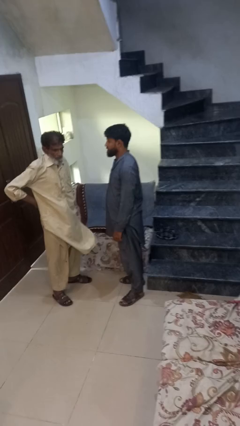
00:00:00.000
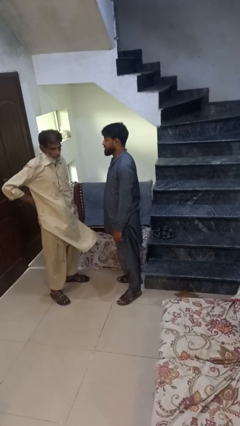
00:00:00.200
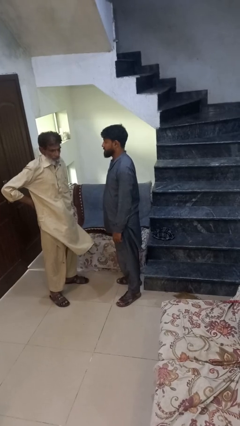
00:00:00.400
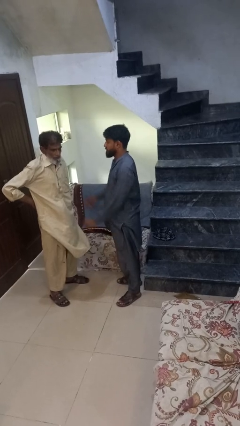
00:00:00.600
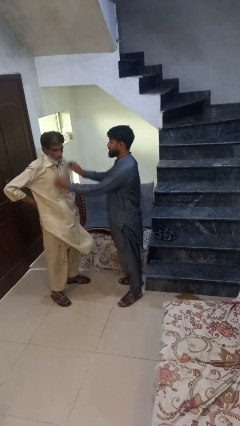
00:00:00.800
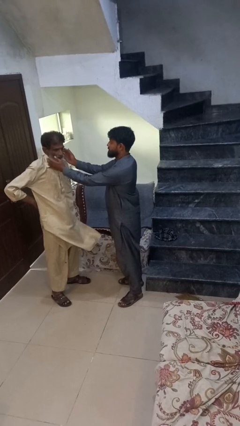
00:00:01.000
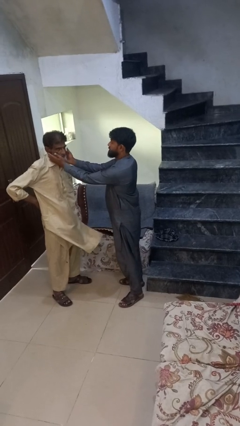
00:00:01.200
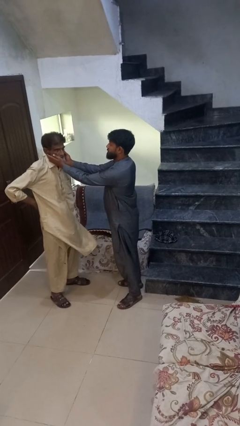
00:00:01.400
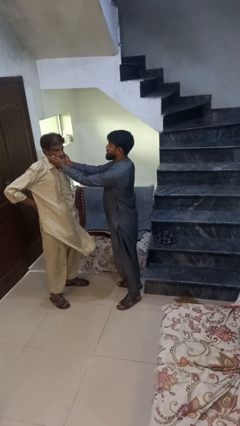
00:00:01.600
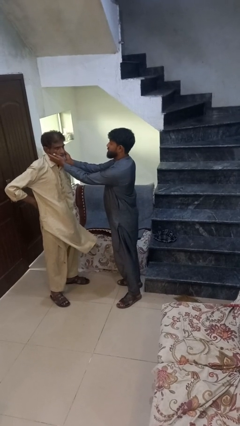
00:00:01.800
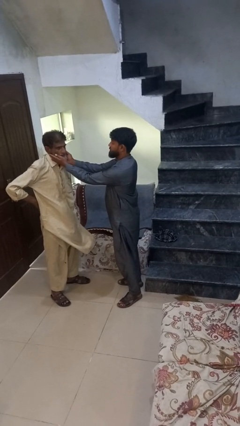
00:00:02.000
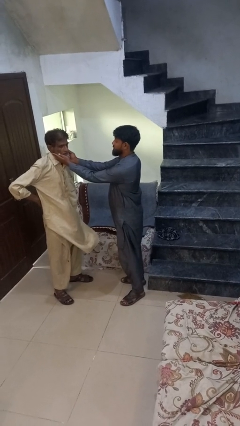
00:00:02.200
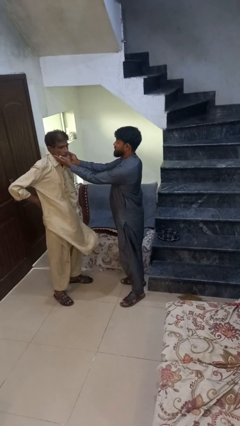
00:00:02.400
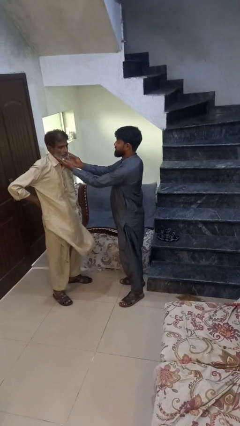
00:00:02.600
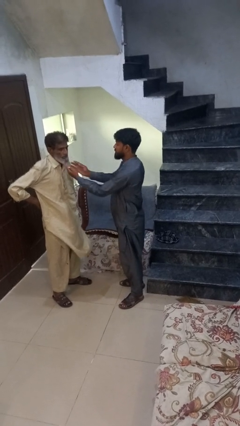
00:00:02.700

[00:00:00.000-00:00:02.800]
person touches face of person

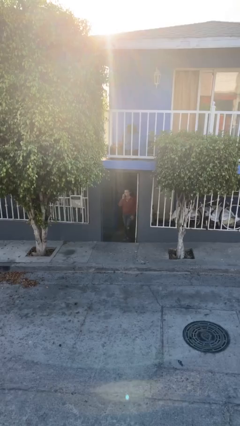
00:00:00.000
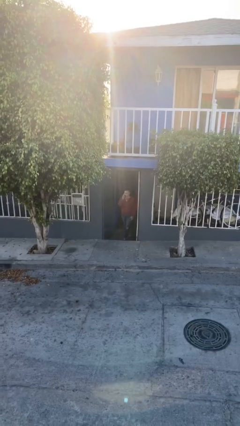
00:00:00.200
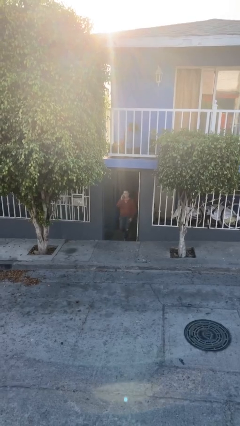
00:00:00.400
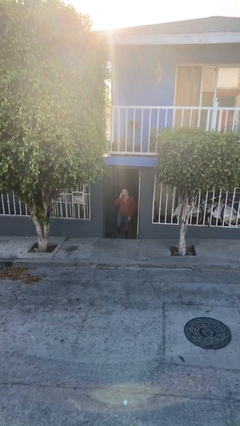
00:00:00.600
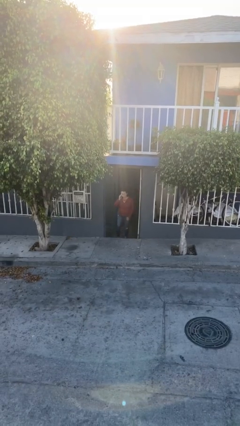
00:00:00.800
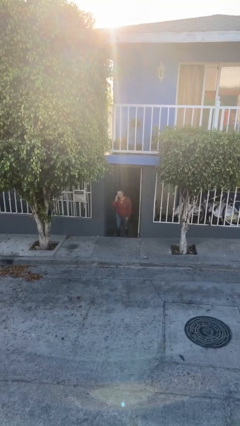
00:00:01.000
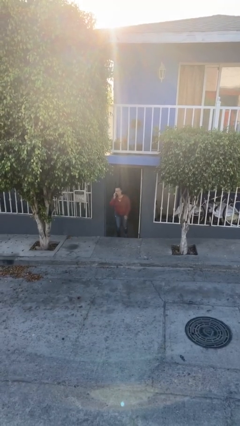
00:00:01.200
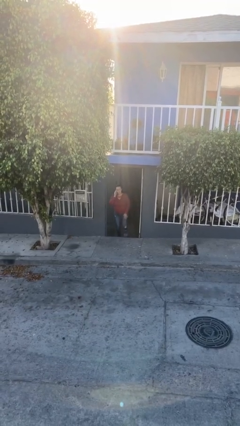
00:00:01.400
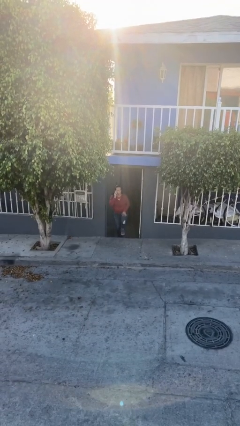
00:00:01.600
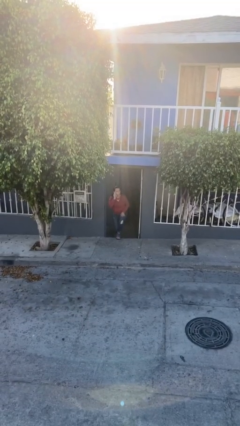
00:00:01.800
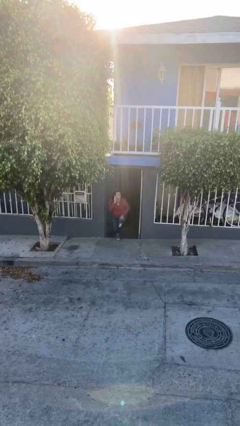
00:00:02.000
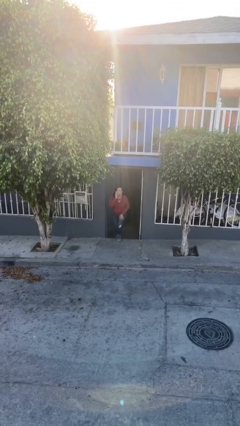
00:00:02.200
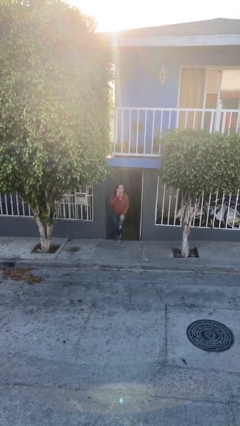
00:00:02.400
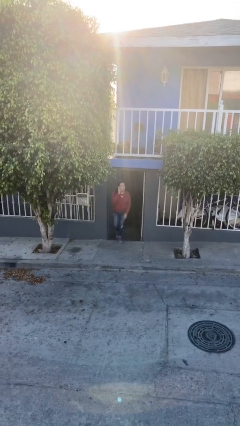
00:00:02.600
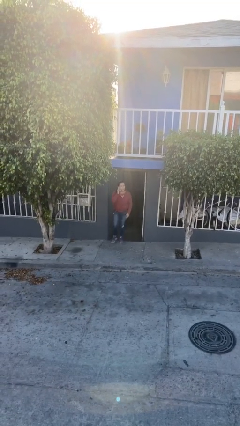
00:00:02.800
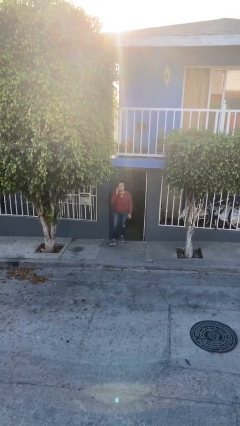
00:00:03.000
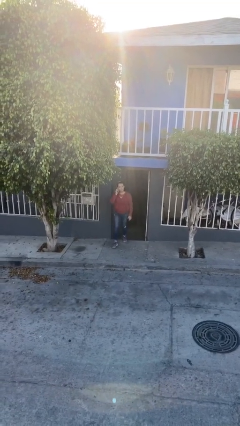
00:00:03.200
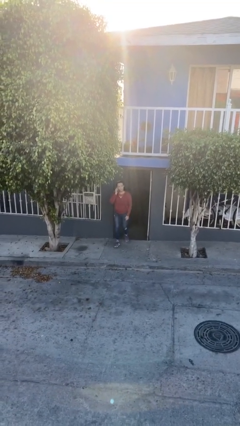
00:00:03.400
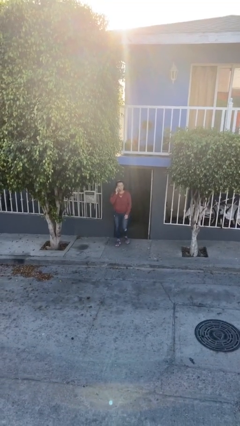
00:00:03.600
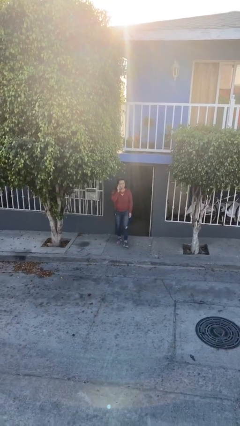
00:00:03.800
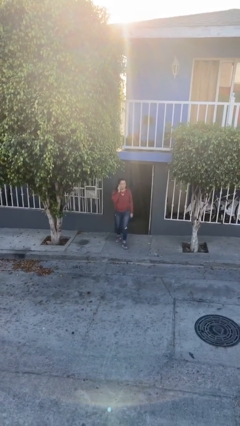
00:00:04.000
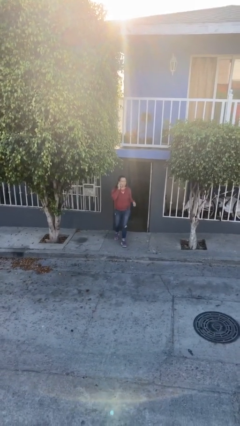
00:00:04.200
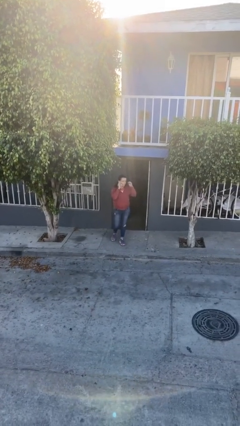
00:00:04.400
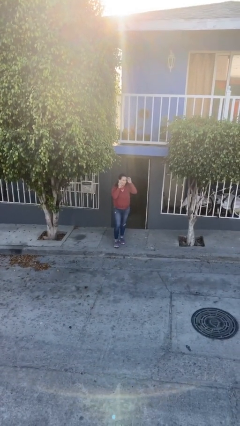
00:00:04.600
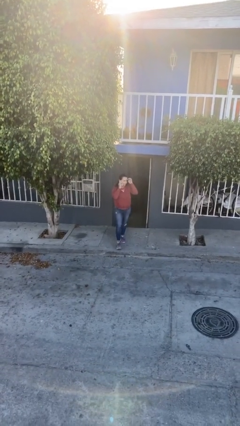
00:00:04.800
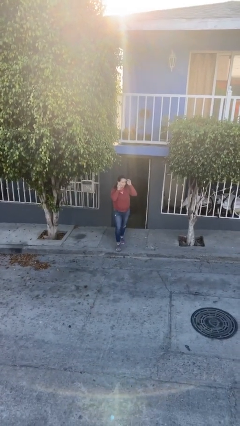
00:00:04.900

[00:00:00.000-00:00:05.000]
person enters scene through structure

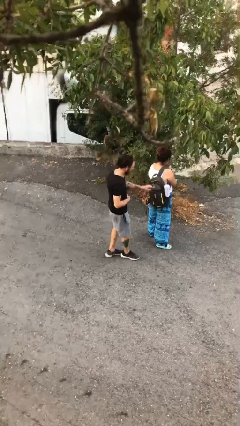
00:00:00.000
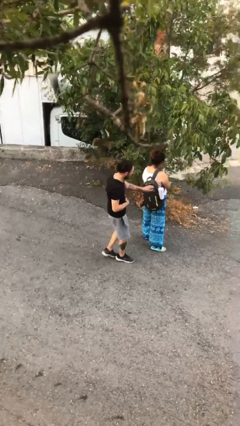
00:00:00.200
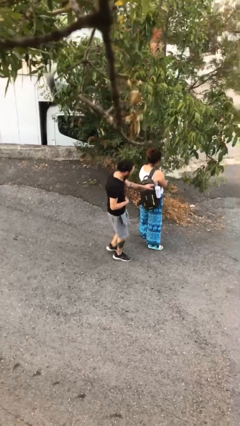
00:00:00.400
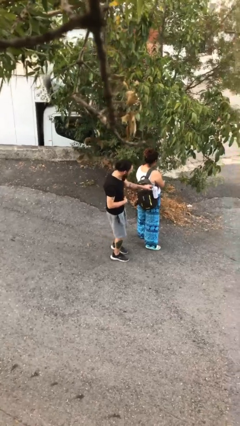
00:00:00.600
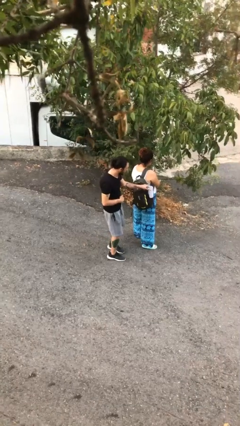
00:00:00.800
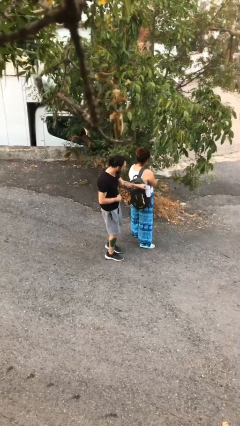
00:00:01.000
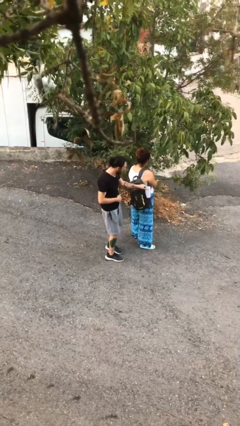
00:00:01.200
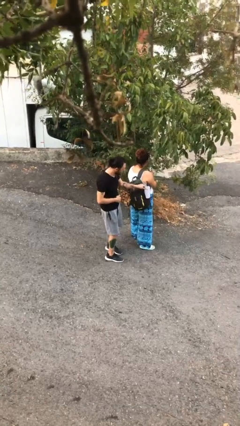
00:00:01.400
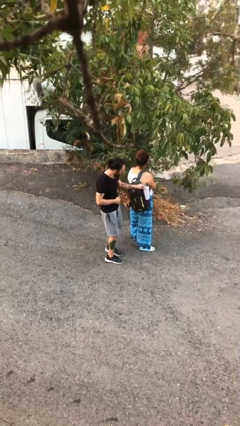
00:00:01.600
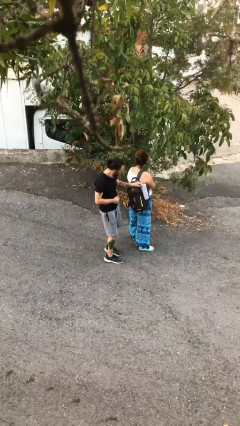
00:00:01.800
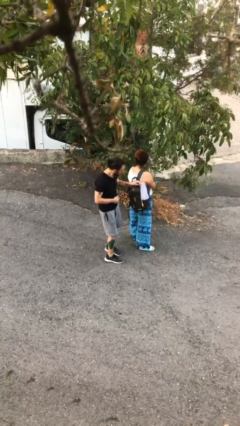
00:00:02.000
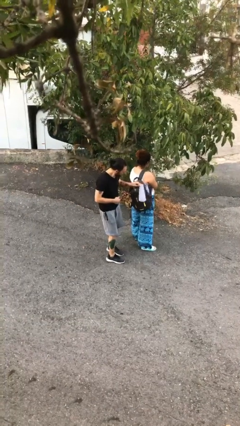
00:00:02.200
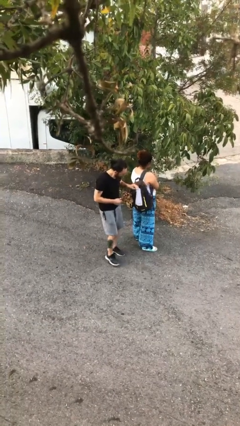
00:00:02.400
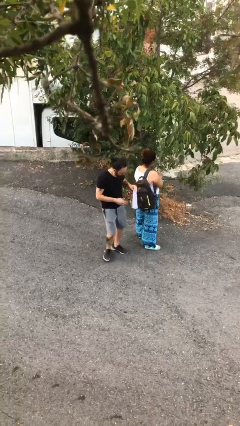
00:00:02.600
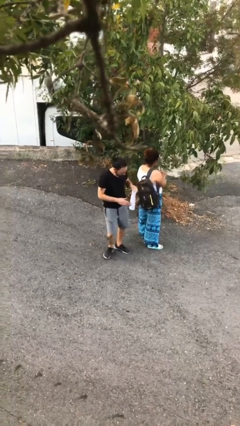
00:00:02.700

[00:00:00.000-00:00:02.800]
person steals object from person

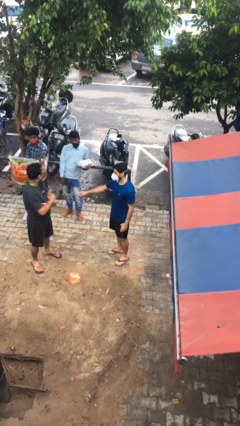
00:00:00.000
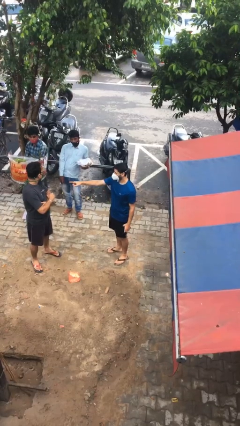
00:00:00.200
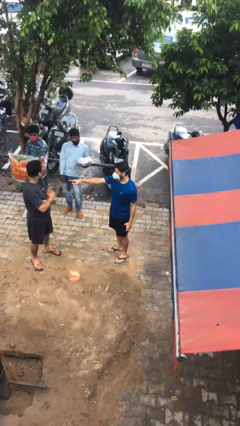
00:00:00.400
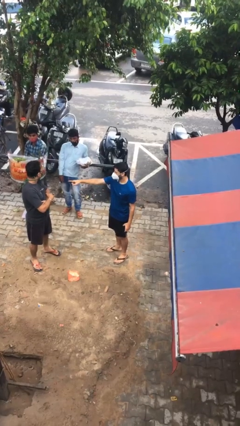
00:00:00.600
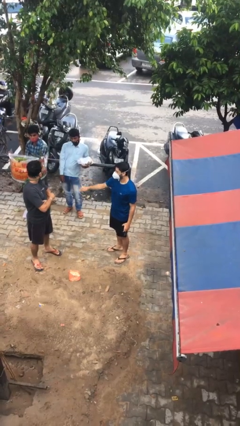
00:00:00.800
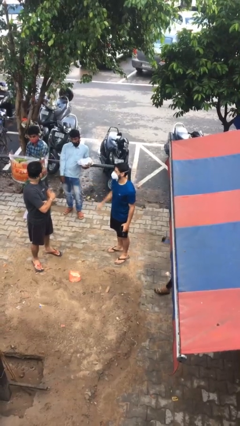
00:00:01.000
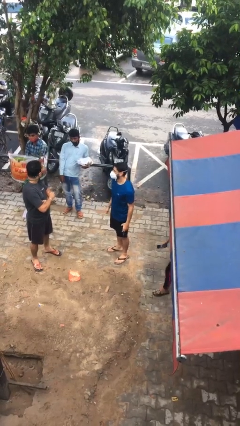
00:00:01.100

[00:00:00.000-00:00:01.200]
person points at person

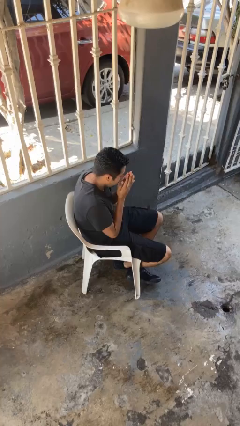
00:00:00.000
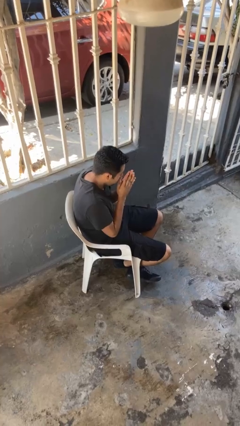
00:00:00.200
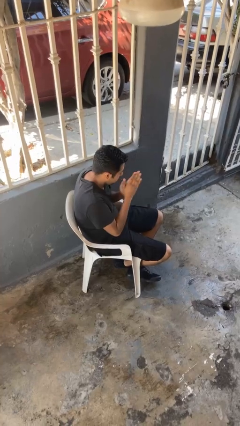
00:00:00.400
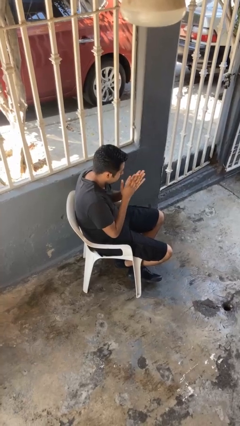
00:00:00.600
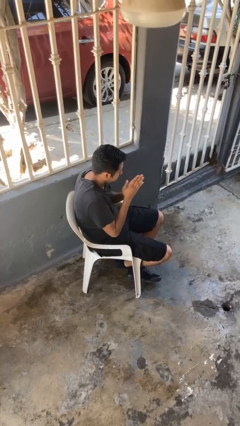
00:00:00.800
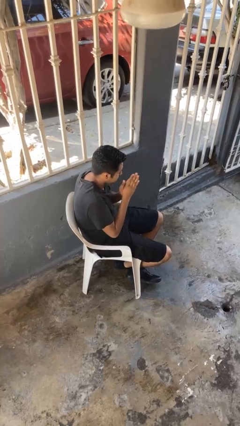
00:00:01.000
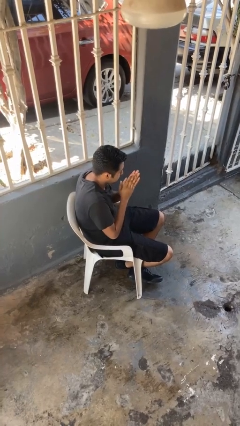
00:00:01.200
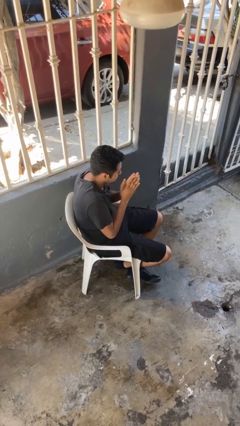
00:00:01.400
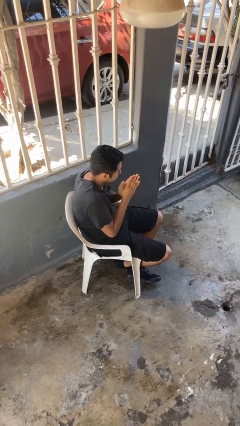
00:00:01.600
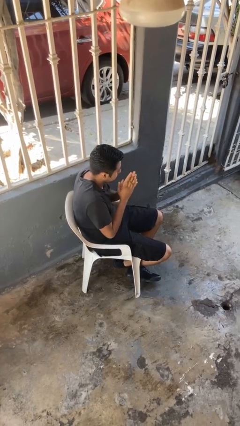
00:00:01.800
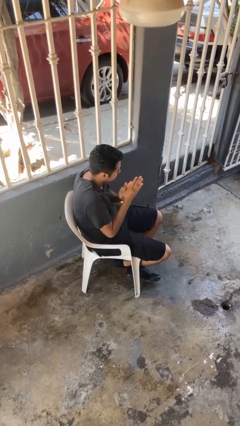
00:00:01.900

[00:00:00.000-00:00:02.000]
person blows into hands

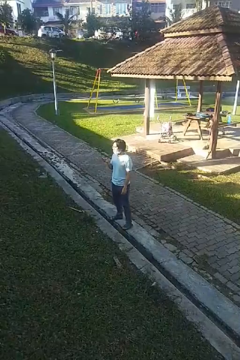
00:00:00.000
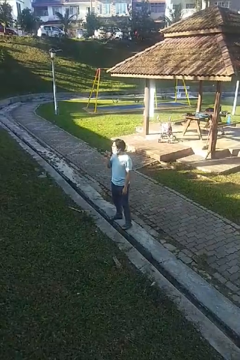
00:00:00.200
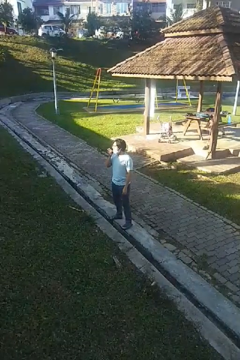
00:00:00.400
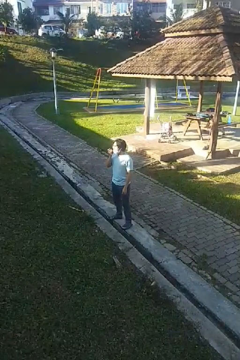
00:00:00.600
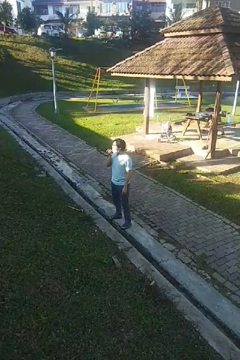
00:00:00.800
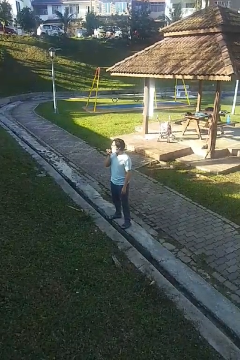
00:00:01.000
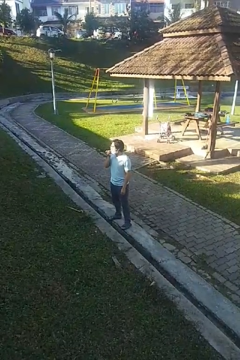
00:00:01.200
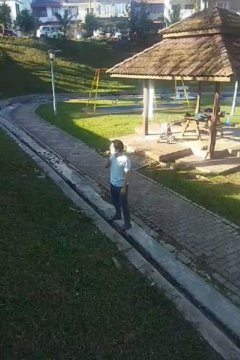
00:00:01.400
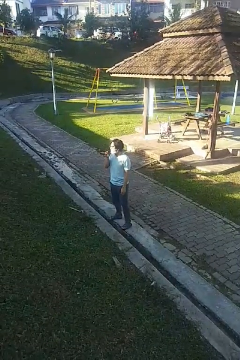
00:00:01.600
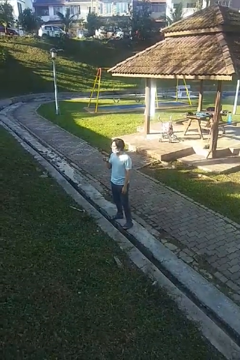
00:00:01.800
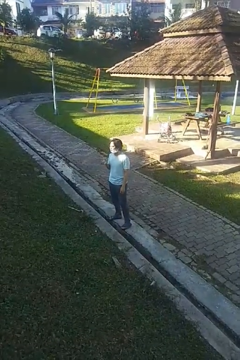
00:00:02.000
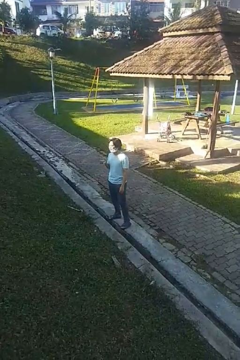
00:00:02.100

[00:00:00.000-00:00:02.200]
person flosses

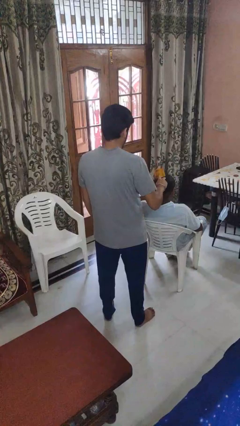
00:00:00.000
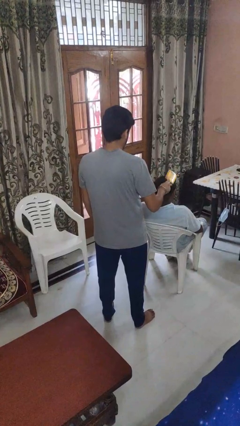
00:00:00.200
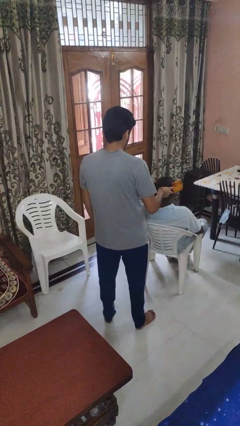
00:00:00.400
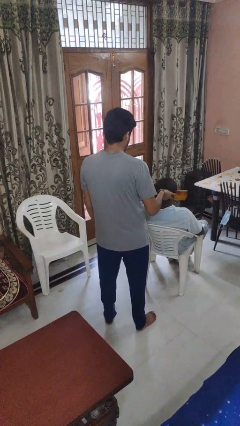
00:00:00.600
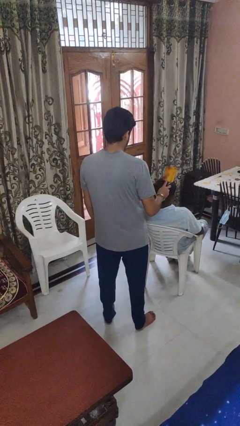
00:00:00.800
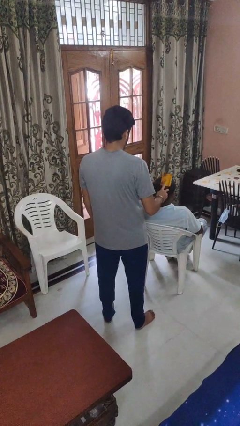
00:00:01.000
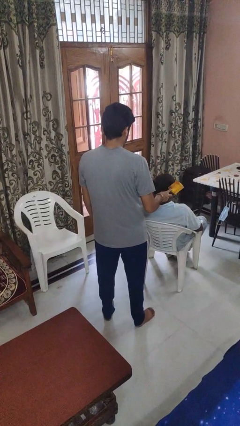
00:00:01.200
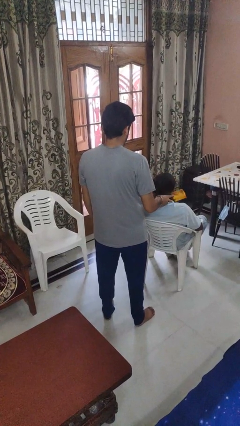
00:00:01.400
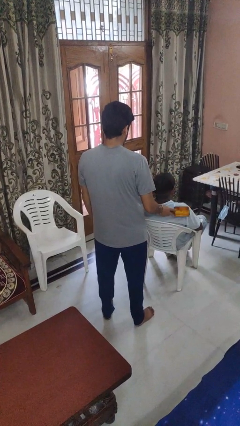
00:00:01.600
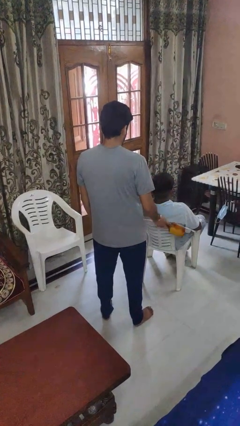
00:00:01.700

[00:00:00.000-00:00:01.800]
person brushes hair of person
